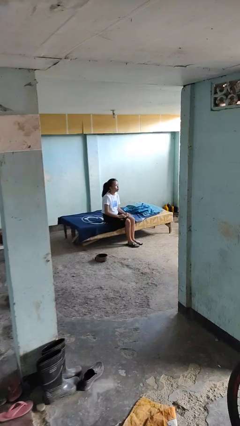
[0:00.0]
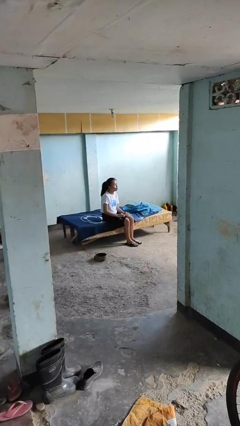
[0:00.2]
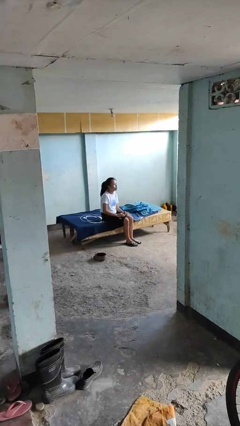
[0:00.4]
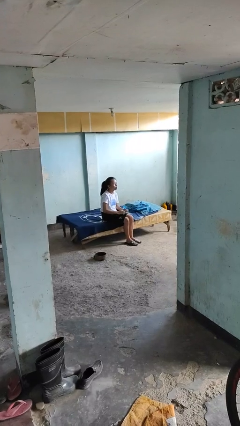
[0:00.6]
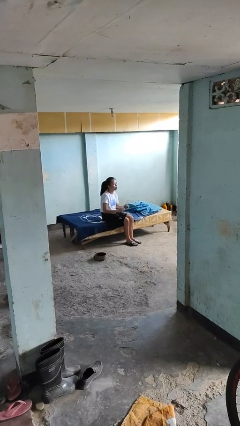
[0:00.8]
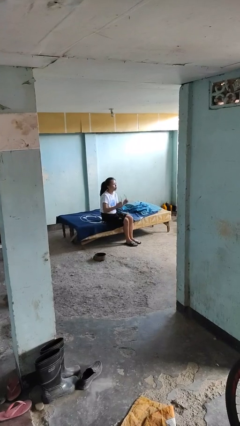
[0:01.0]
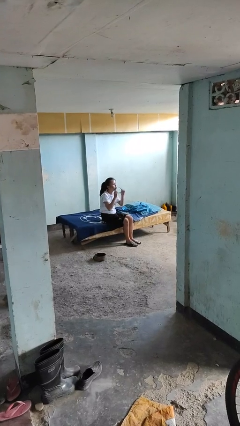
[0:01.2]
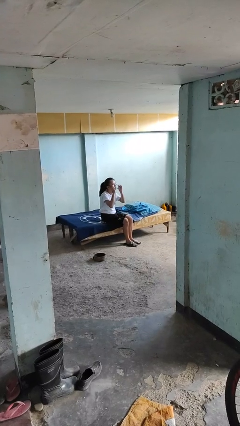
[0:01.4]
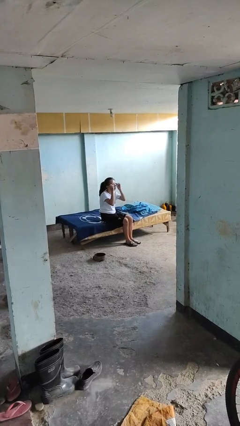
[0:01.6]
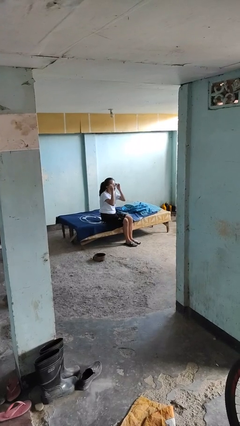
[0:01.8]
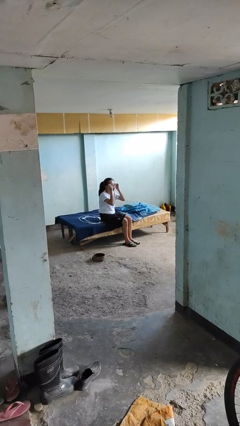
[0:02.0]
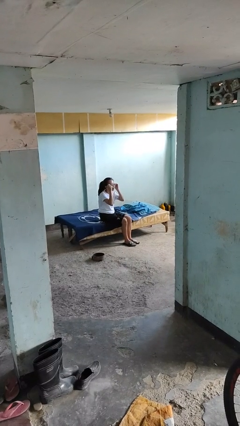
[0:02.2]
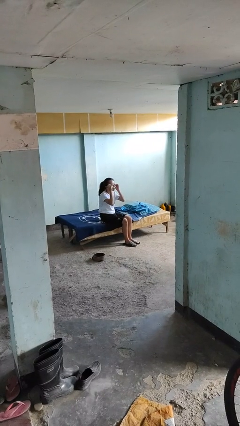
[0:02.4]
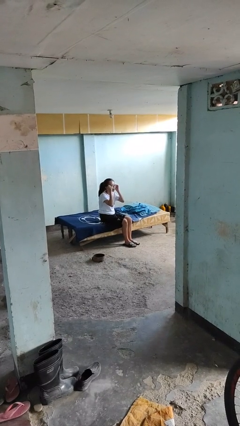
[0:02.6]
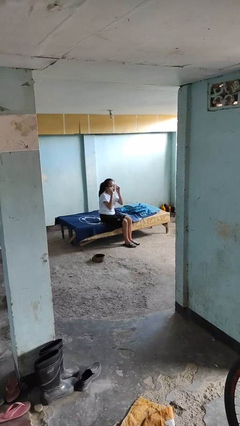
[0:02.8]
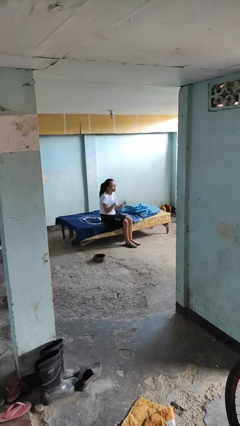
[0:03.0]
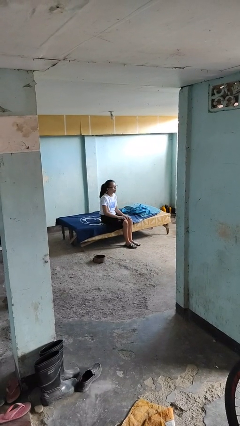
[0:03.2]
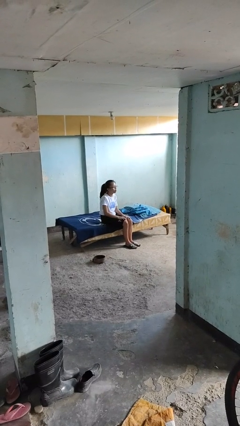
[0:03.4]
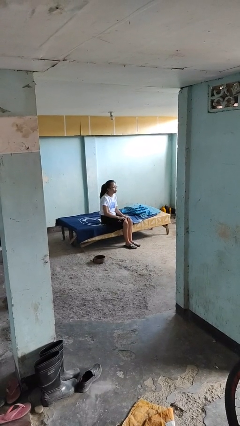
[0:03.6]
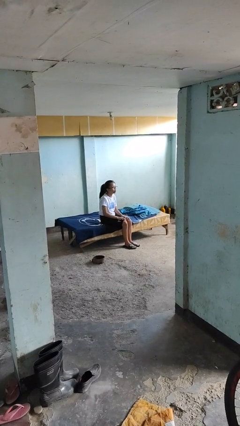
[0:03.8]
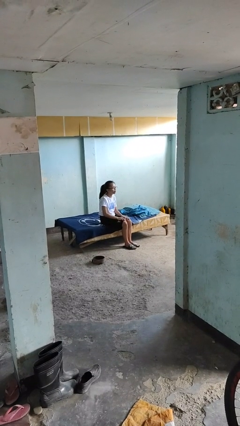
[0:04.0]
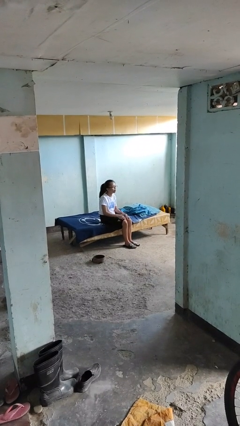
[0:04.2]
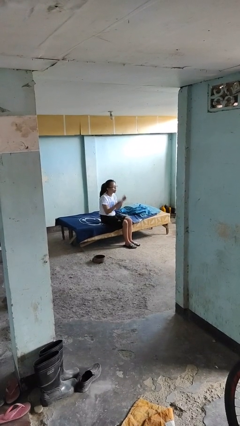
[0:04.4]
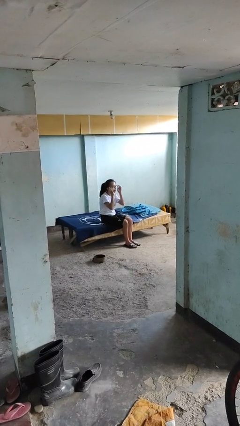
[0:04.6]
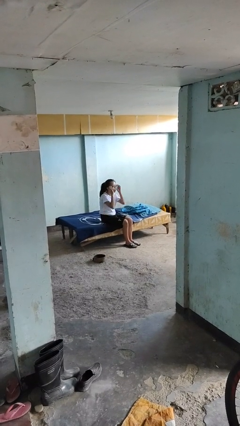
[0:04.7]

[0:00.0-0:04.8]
person puts on glasses

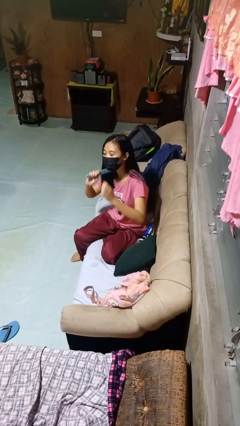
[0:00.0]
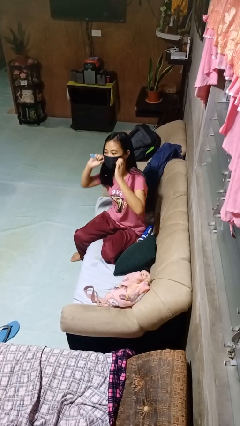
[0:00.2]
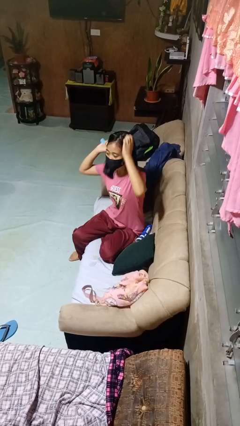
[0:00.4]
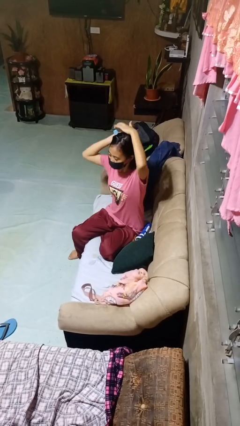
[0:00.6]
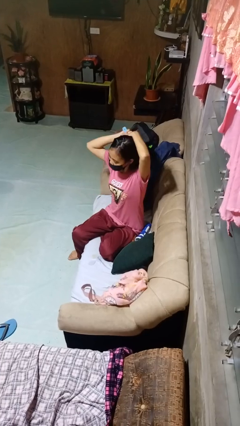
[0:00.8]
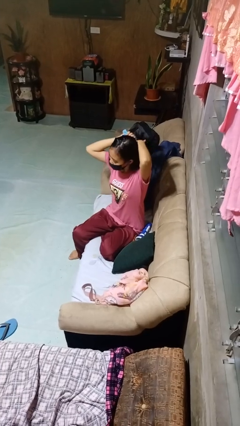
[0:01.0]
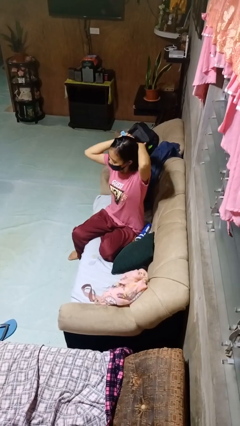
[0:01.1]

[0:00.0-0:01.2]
person brushes hair

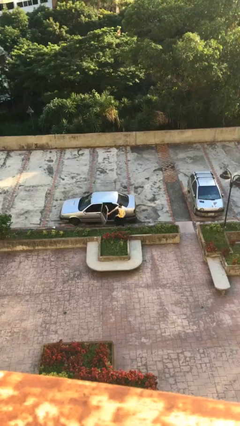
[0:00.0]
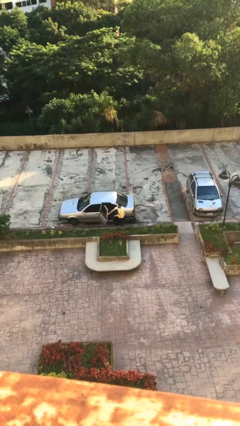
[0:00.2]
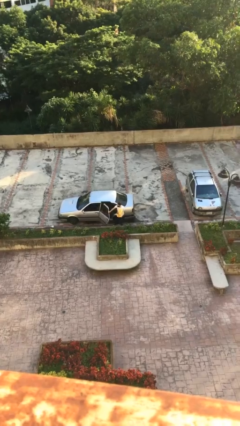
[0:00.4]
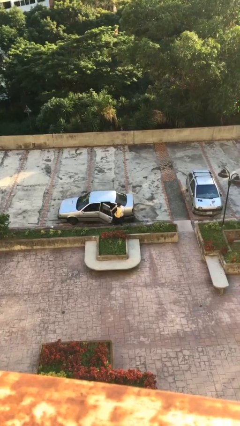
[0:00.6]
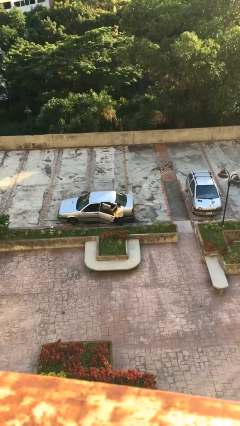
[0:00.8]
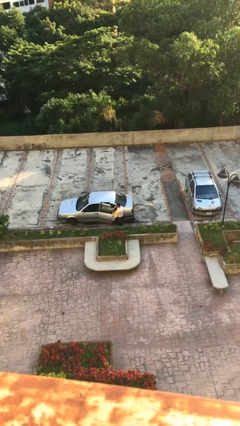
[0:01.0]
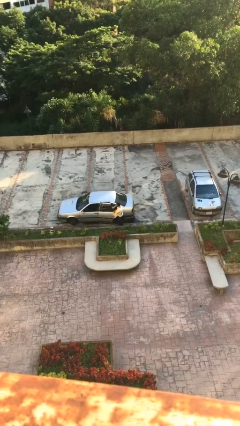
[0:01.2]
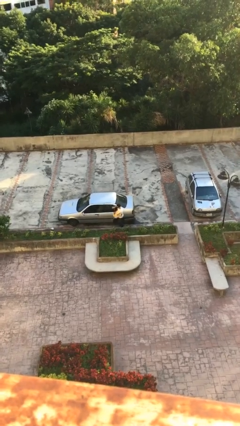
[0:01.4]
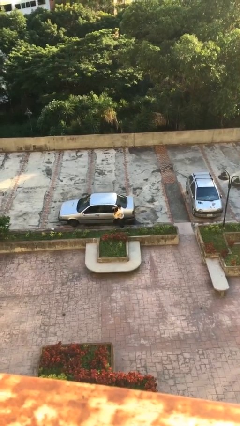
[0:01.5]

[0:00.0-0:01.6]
person closes car door

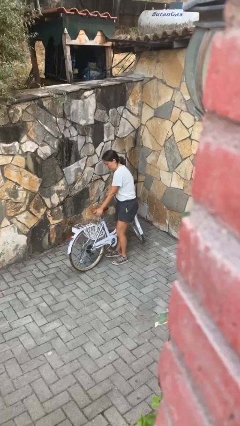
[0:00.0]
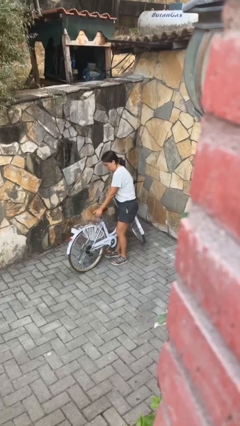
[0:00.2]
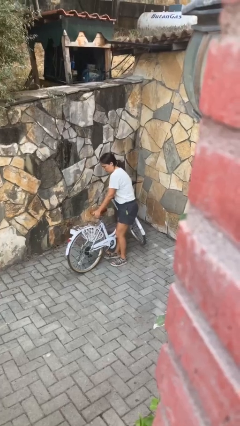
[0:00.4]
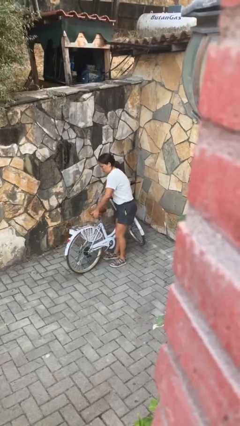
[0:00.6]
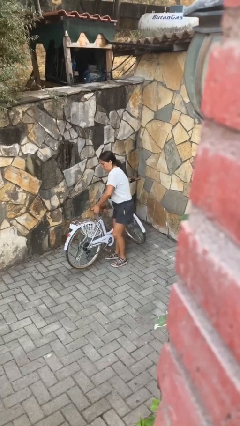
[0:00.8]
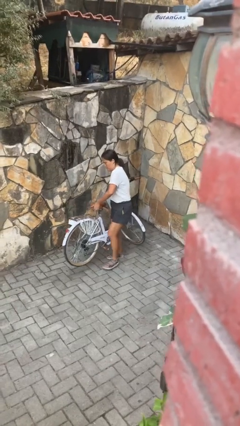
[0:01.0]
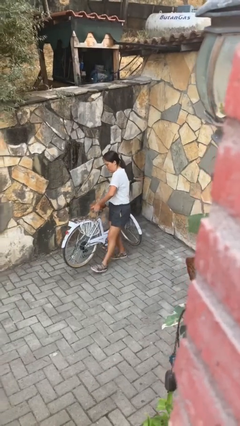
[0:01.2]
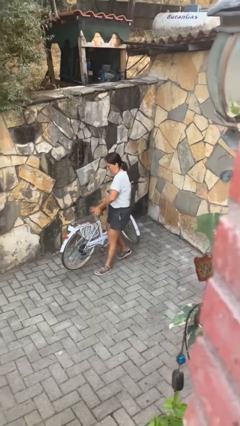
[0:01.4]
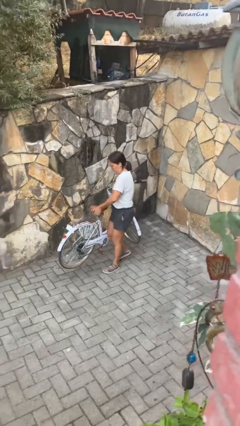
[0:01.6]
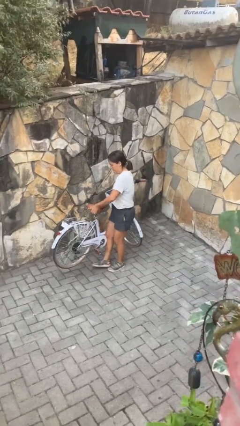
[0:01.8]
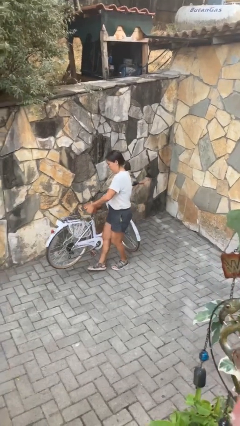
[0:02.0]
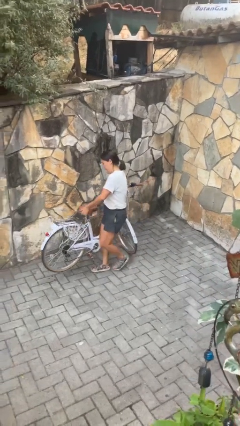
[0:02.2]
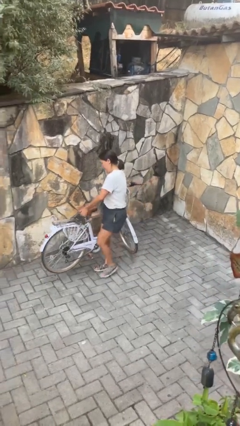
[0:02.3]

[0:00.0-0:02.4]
person carries bicycle

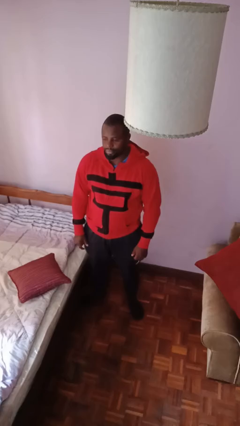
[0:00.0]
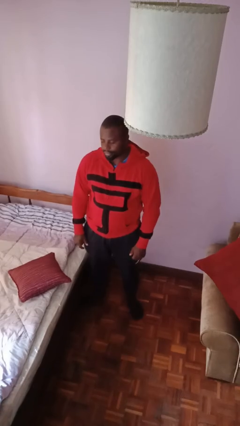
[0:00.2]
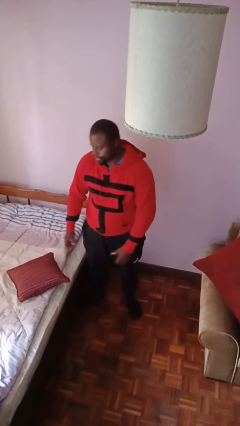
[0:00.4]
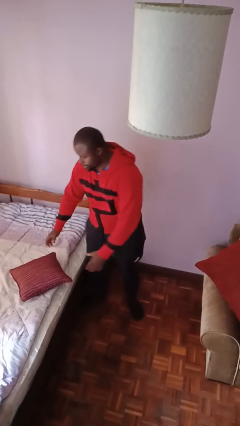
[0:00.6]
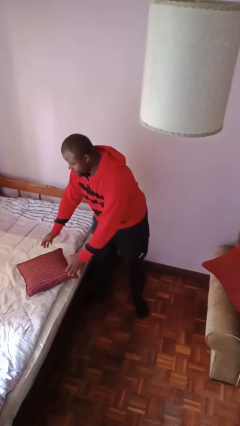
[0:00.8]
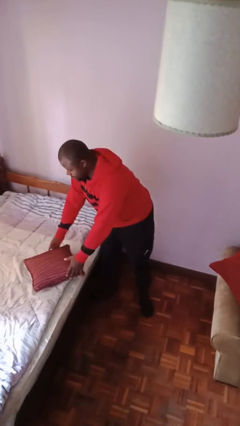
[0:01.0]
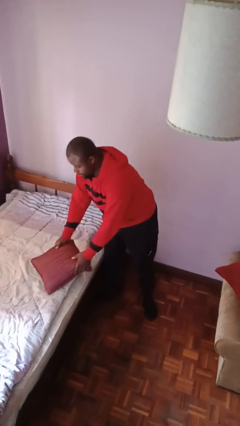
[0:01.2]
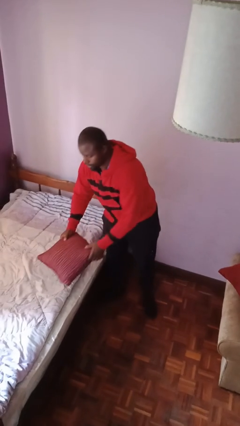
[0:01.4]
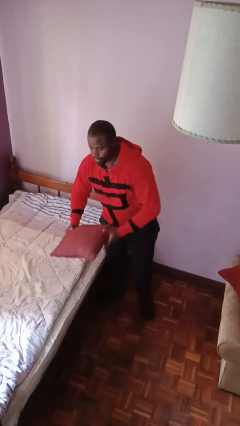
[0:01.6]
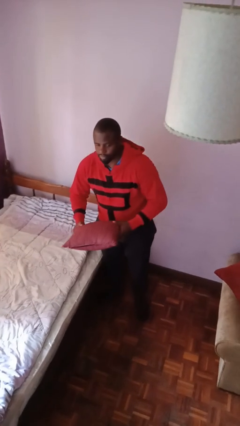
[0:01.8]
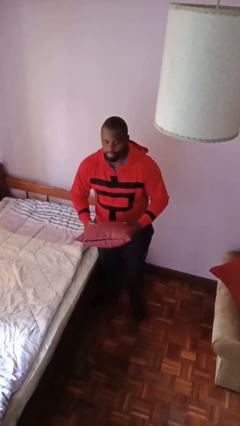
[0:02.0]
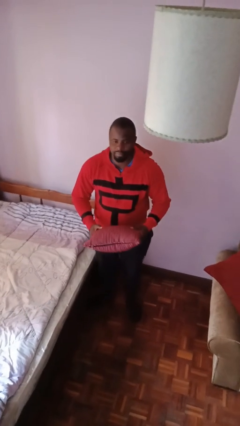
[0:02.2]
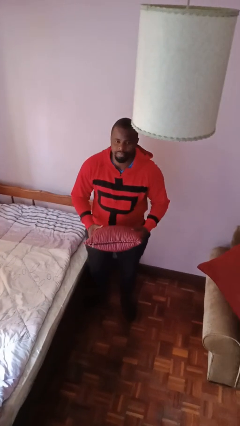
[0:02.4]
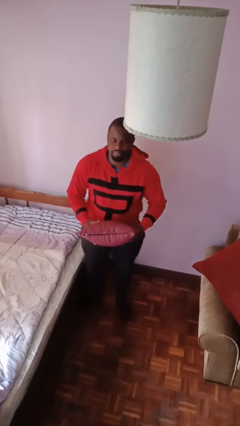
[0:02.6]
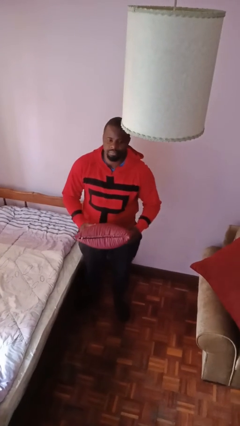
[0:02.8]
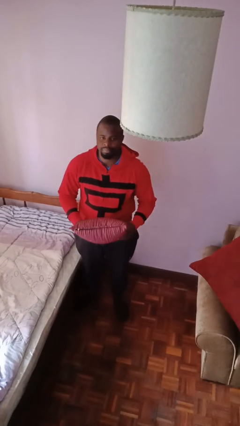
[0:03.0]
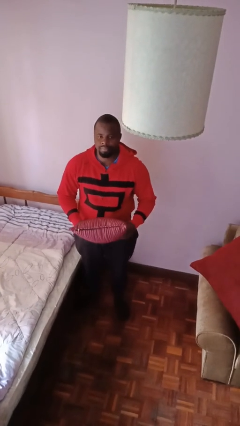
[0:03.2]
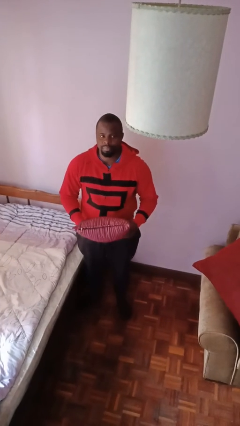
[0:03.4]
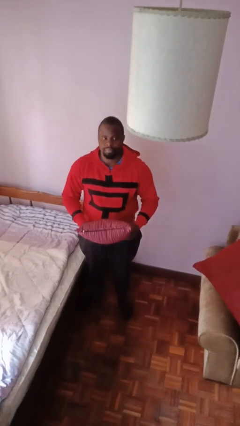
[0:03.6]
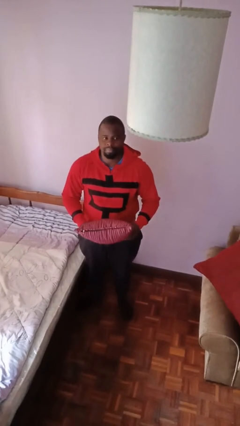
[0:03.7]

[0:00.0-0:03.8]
person picks up object from bed

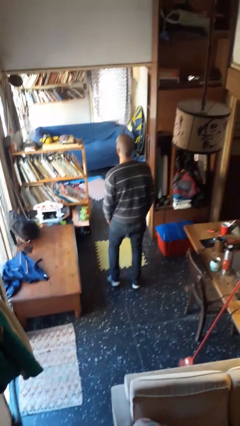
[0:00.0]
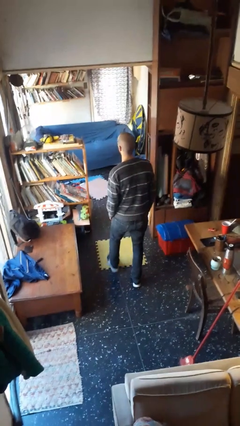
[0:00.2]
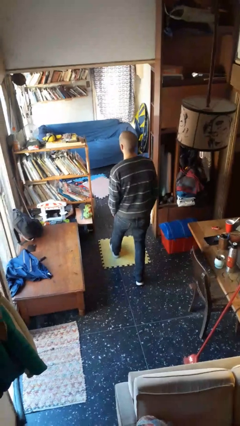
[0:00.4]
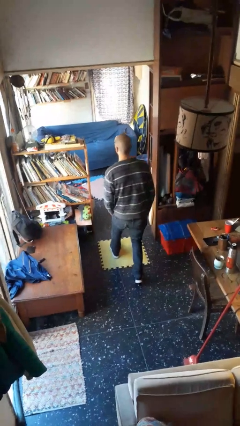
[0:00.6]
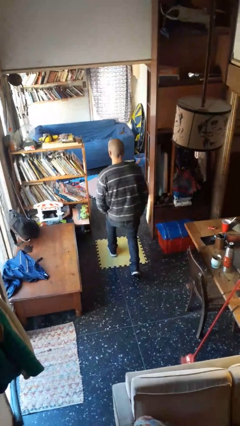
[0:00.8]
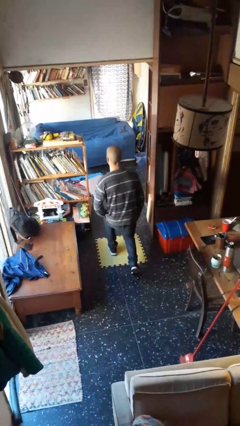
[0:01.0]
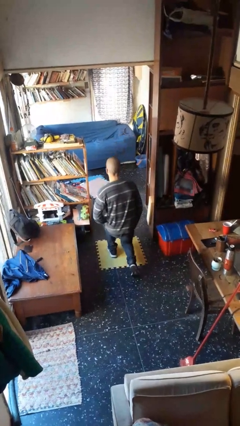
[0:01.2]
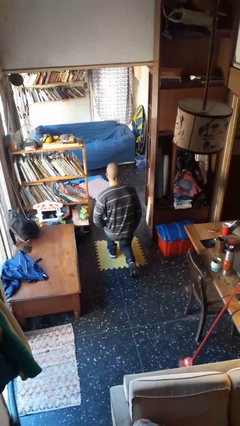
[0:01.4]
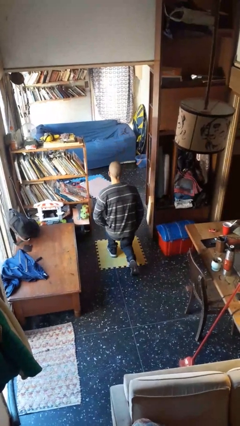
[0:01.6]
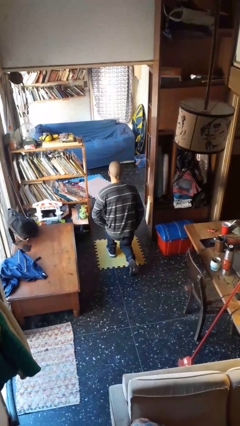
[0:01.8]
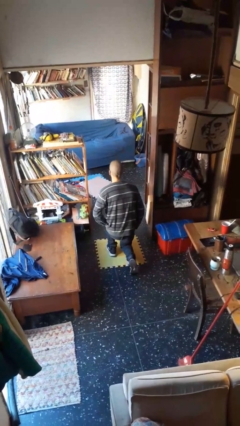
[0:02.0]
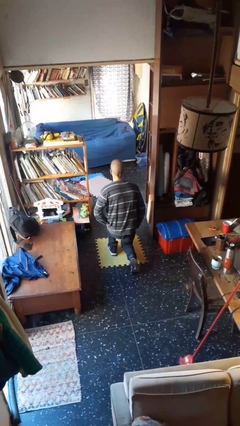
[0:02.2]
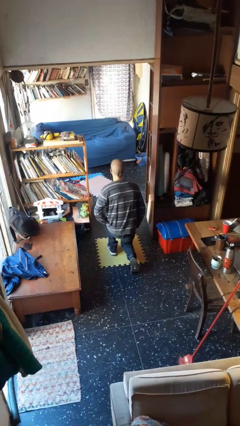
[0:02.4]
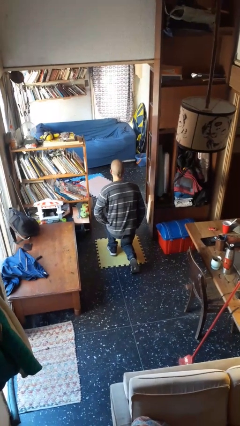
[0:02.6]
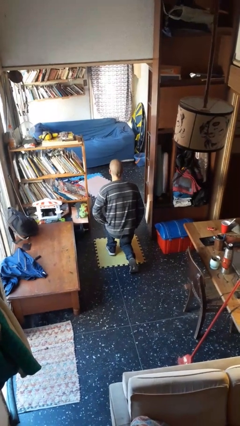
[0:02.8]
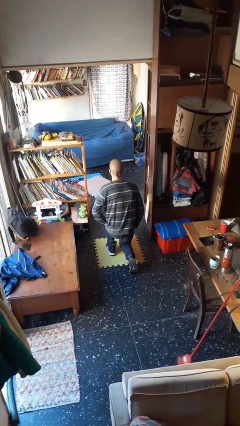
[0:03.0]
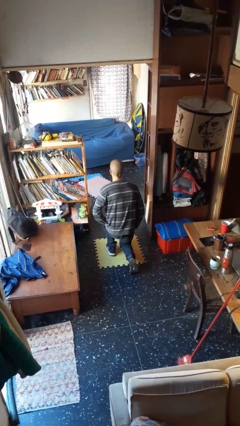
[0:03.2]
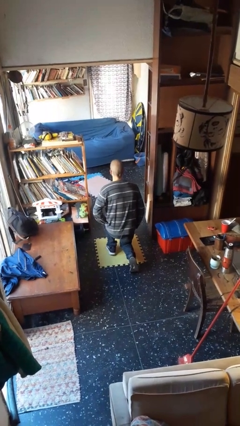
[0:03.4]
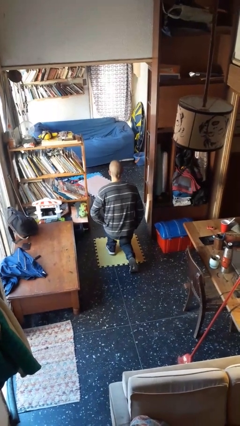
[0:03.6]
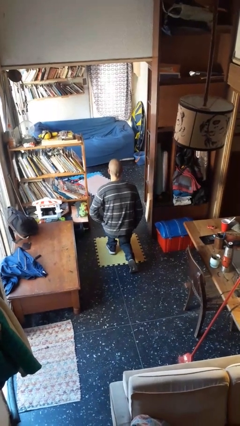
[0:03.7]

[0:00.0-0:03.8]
person kneels
